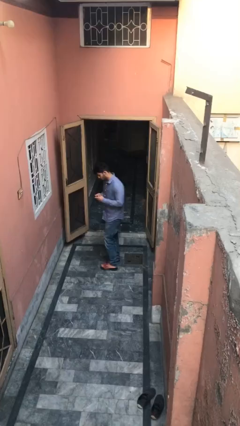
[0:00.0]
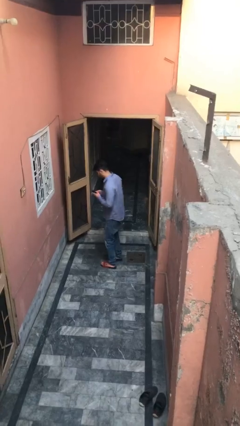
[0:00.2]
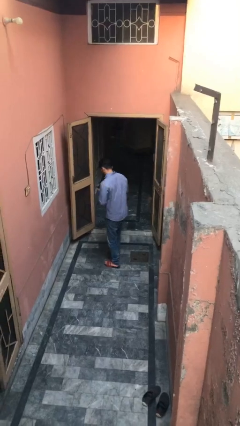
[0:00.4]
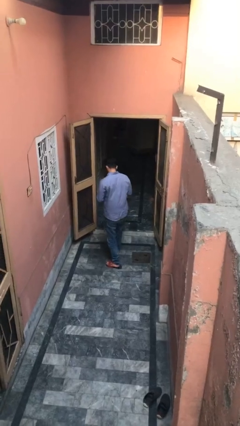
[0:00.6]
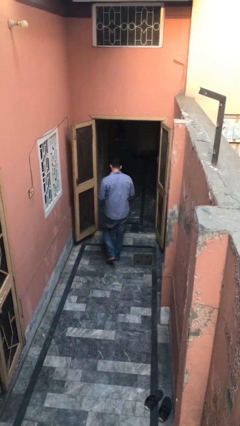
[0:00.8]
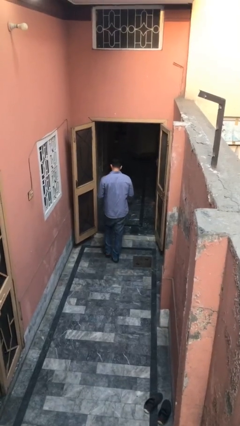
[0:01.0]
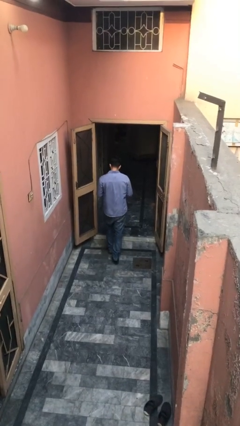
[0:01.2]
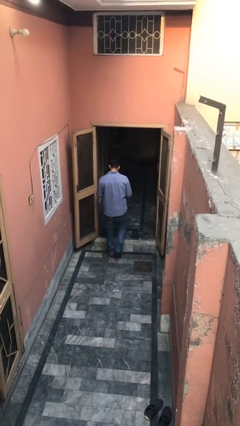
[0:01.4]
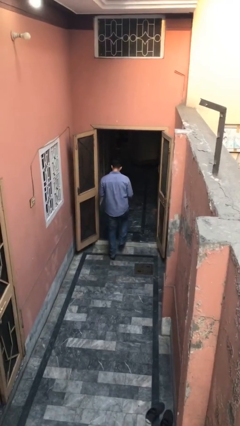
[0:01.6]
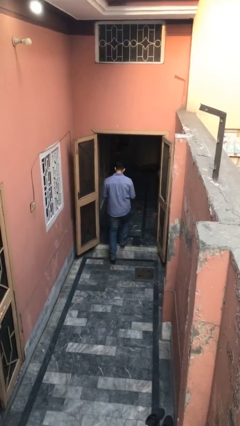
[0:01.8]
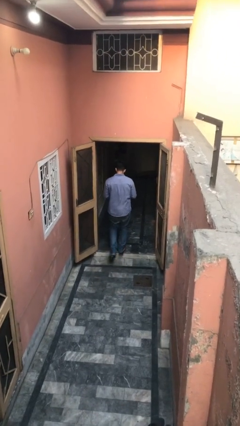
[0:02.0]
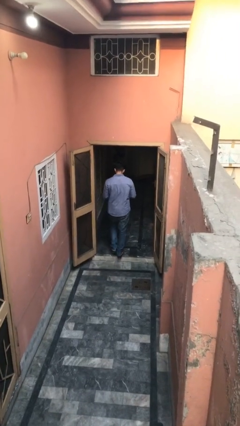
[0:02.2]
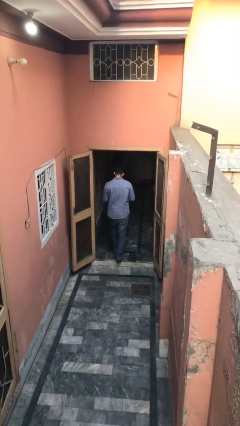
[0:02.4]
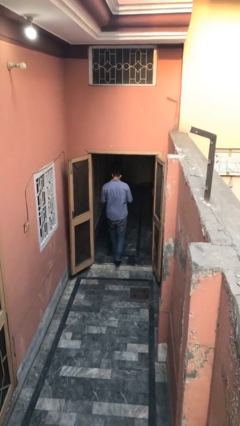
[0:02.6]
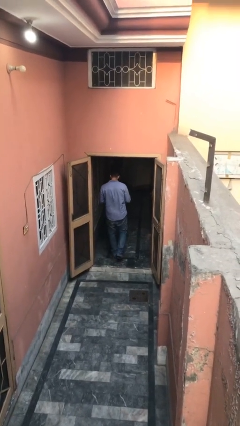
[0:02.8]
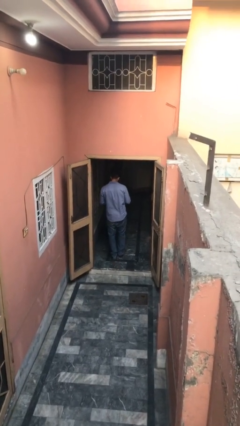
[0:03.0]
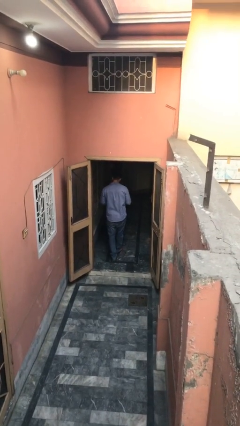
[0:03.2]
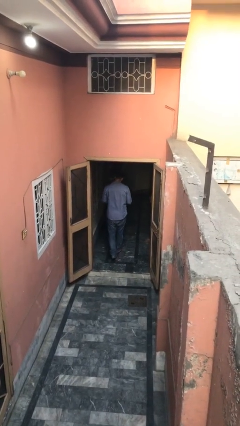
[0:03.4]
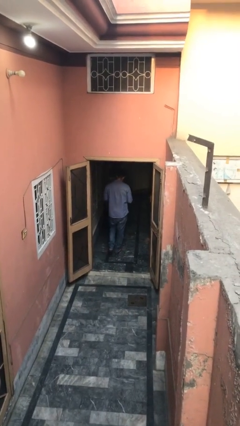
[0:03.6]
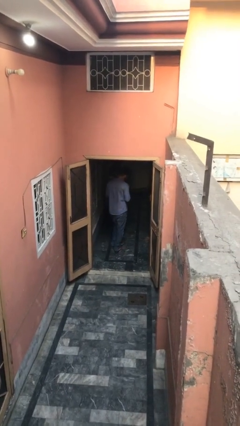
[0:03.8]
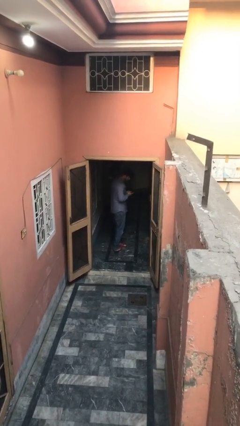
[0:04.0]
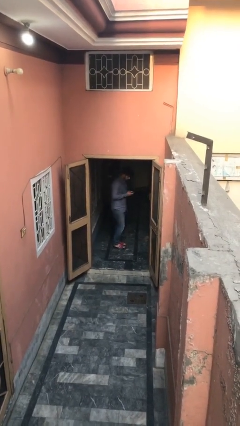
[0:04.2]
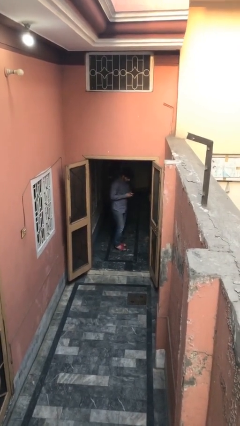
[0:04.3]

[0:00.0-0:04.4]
person exits scene through structure

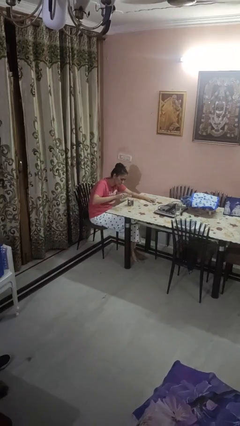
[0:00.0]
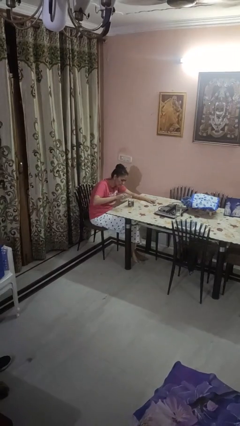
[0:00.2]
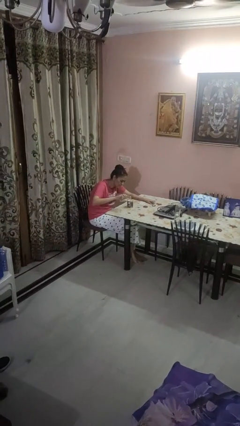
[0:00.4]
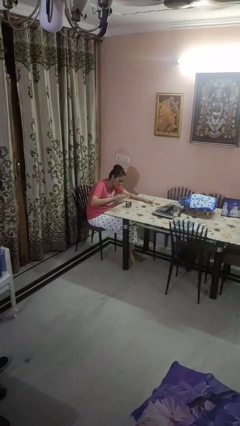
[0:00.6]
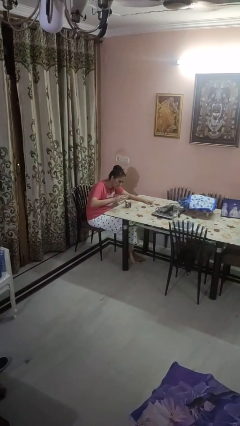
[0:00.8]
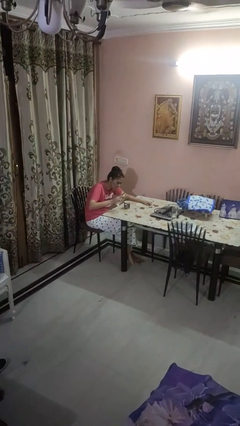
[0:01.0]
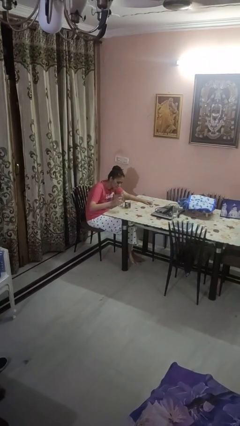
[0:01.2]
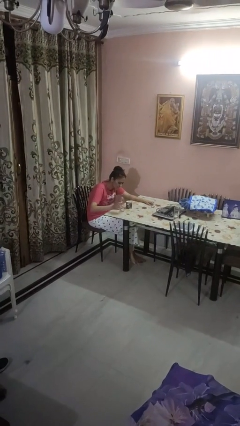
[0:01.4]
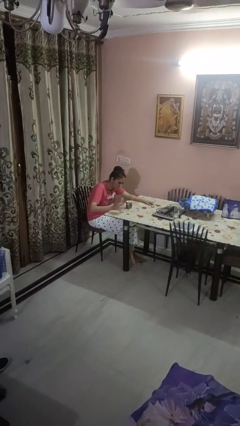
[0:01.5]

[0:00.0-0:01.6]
person pours liquid into cup

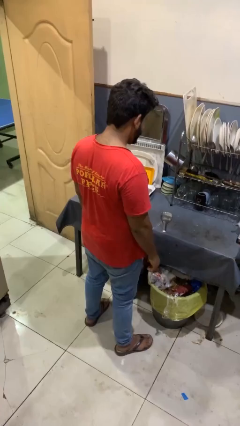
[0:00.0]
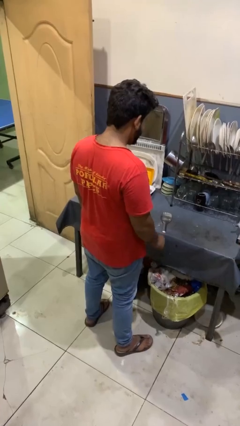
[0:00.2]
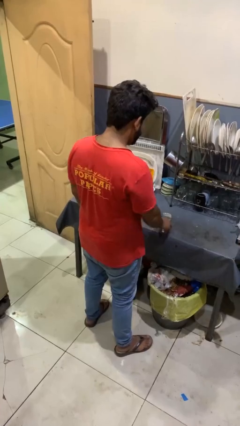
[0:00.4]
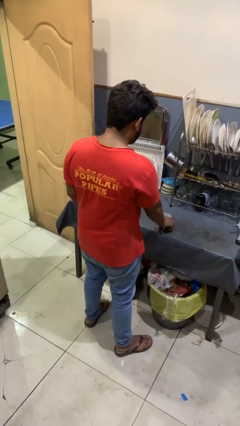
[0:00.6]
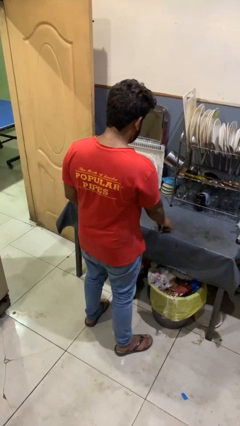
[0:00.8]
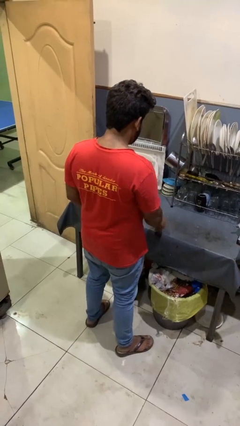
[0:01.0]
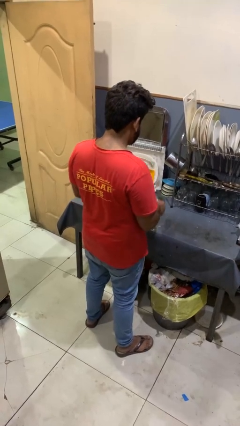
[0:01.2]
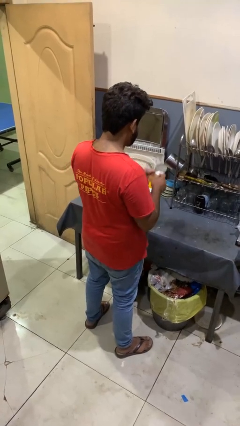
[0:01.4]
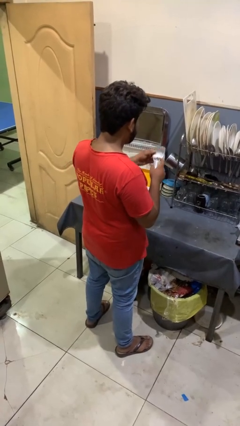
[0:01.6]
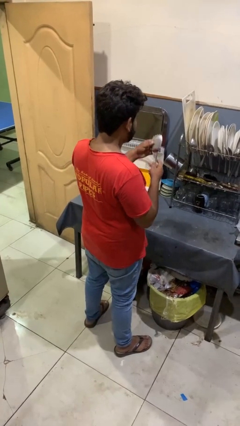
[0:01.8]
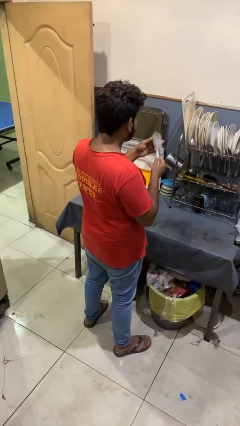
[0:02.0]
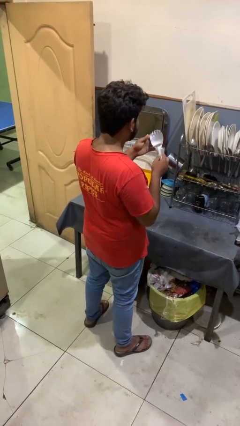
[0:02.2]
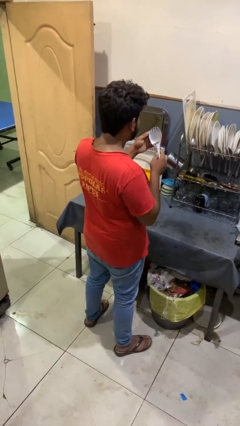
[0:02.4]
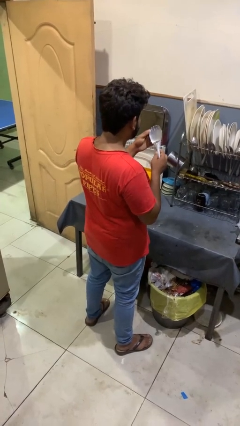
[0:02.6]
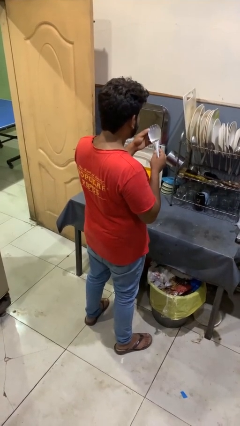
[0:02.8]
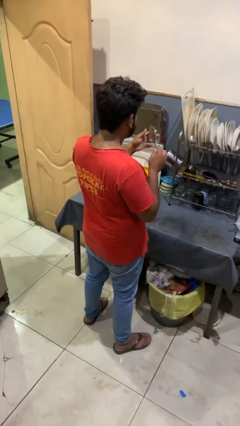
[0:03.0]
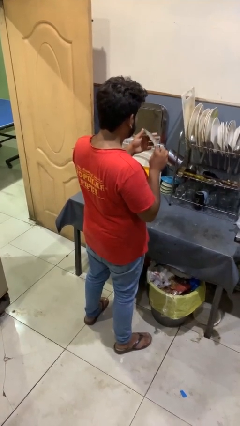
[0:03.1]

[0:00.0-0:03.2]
person picks up object from countertop

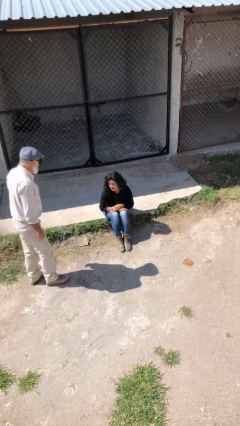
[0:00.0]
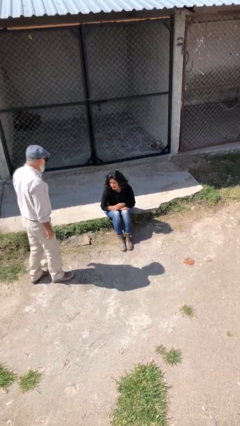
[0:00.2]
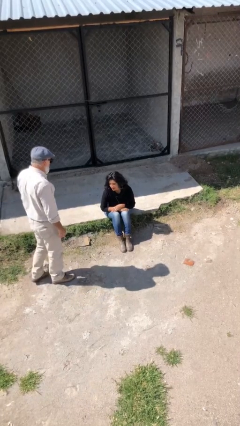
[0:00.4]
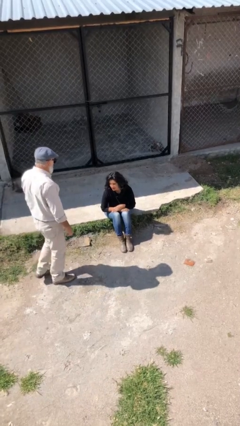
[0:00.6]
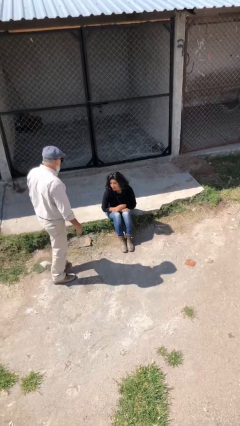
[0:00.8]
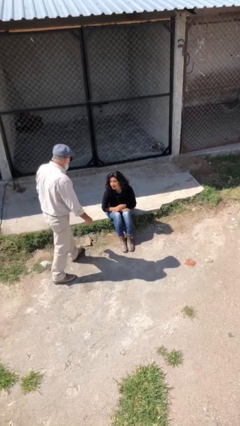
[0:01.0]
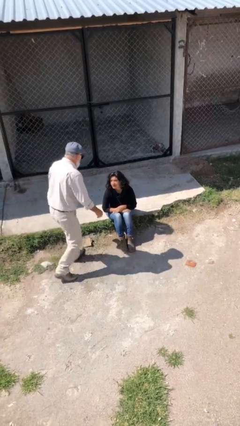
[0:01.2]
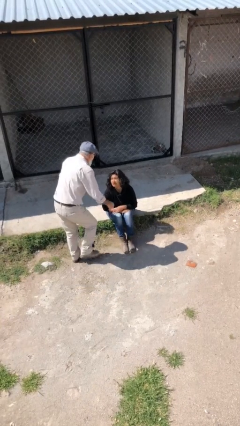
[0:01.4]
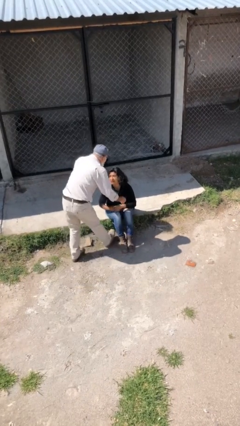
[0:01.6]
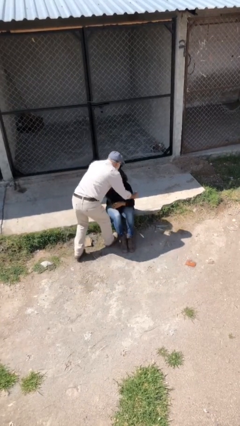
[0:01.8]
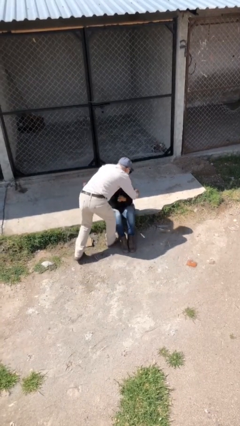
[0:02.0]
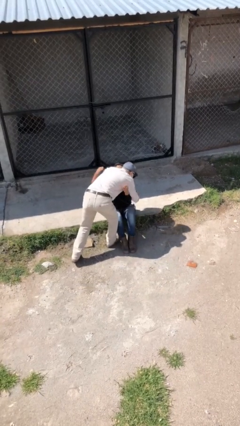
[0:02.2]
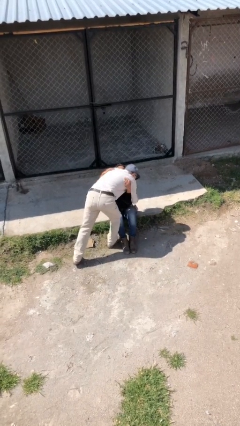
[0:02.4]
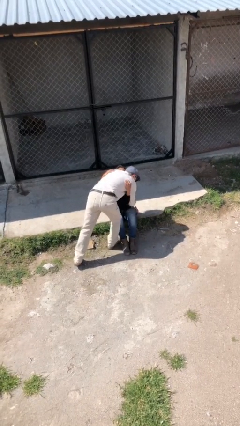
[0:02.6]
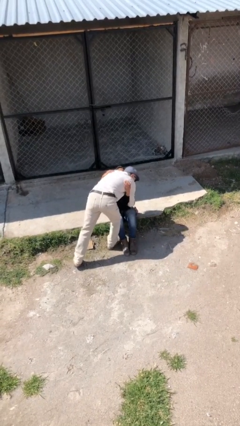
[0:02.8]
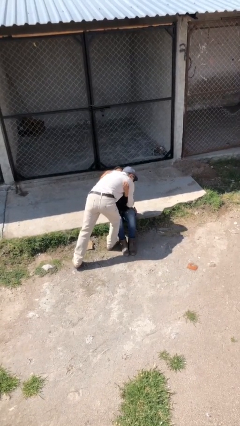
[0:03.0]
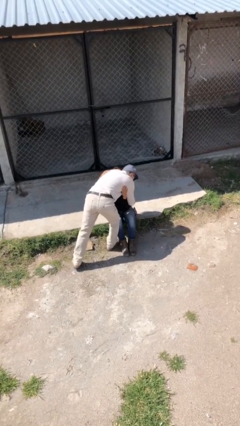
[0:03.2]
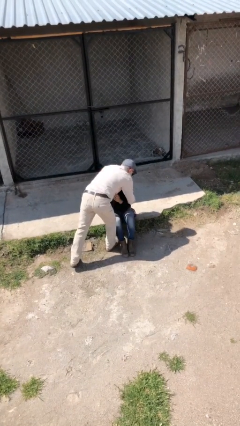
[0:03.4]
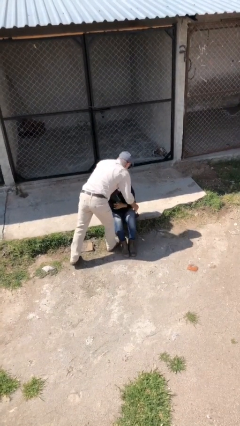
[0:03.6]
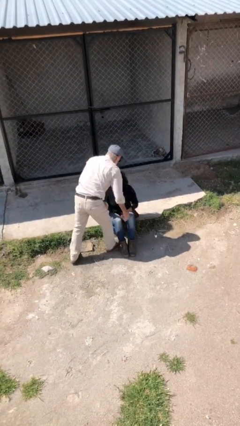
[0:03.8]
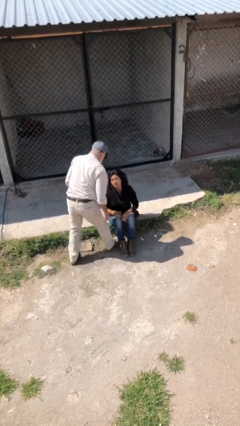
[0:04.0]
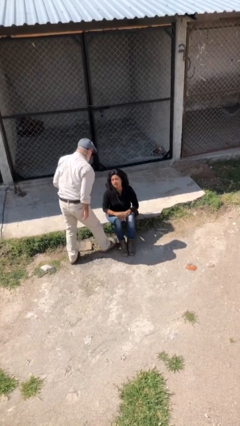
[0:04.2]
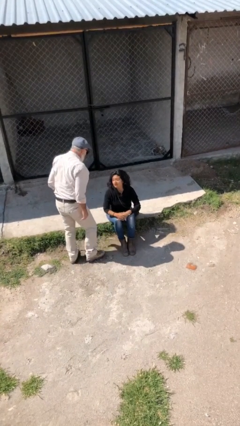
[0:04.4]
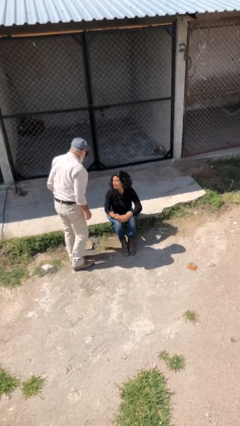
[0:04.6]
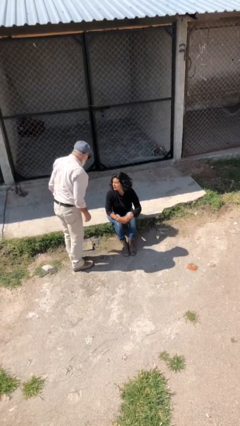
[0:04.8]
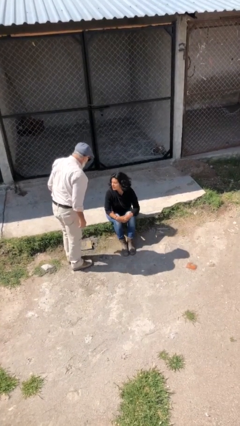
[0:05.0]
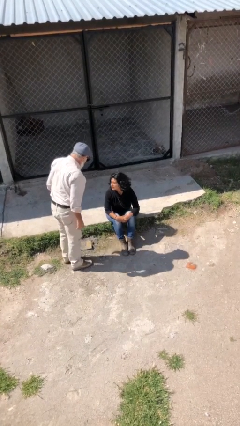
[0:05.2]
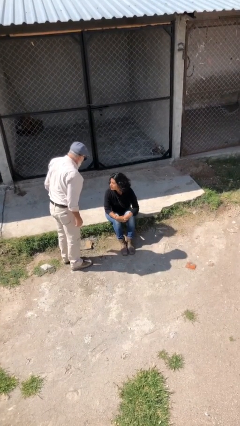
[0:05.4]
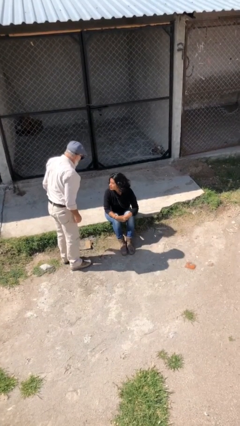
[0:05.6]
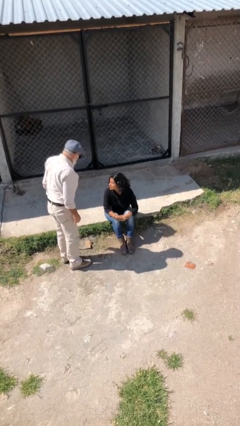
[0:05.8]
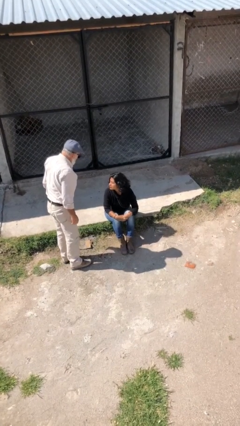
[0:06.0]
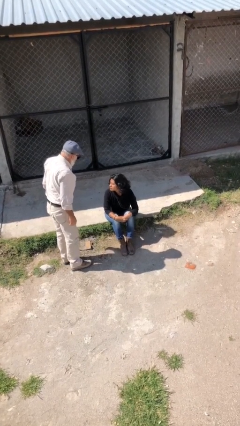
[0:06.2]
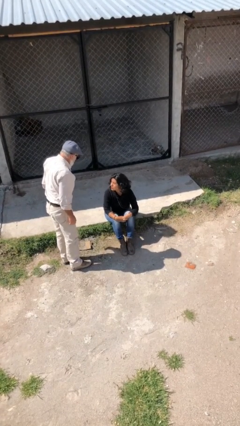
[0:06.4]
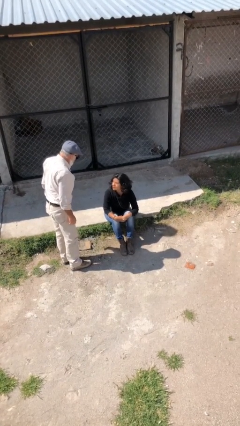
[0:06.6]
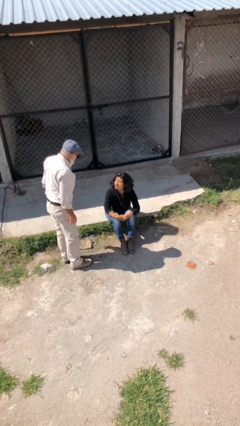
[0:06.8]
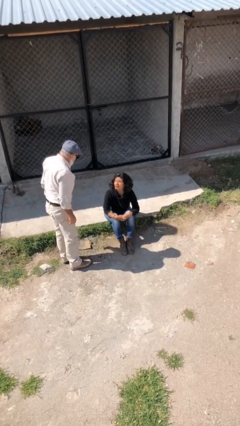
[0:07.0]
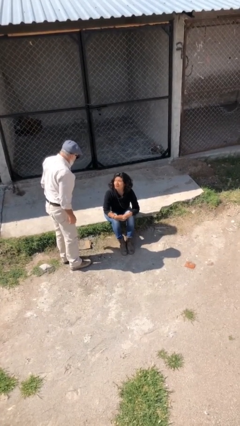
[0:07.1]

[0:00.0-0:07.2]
person embraces person

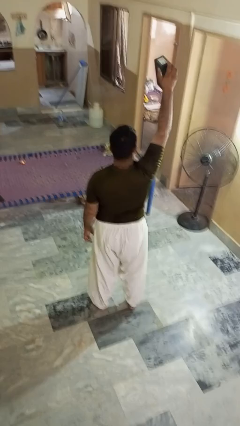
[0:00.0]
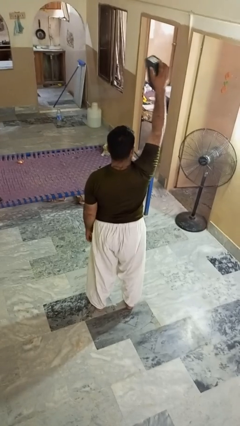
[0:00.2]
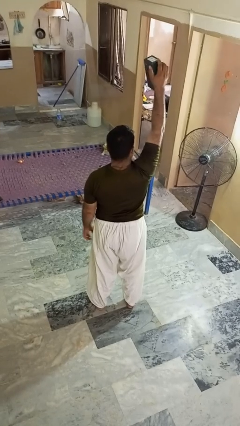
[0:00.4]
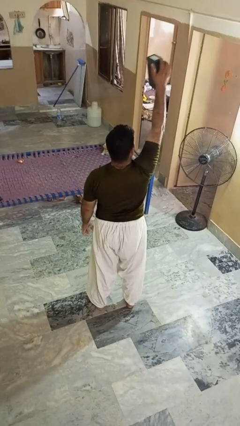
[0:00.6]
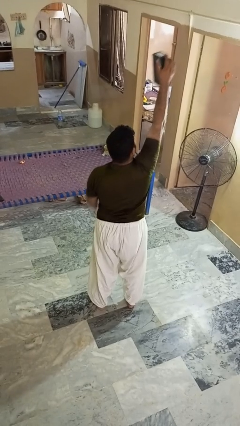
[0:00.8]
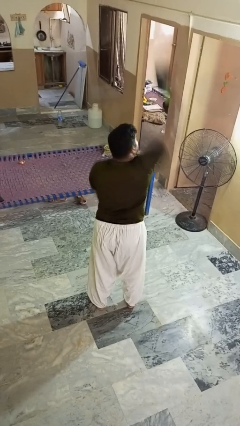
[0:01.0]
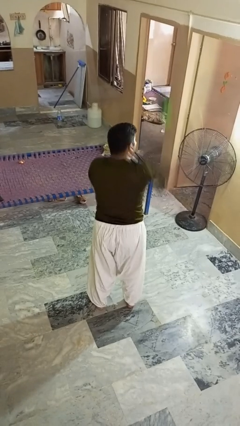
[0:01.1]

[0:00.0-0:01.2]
person drops object
